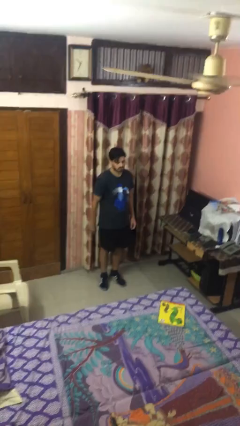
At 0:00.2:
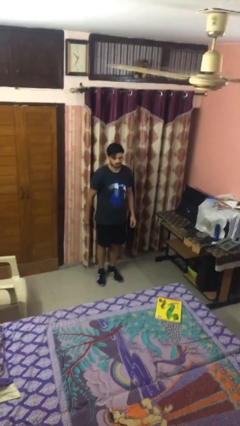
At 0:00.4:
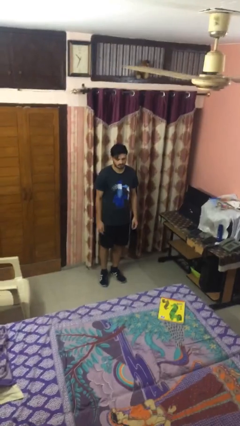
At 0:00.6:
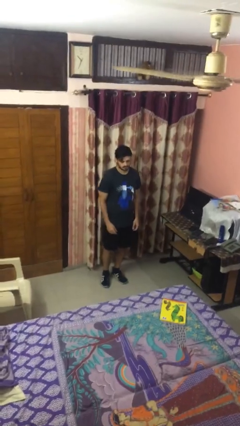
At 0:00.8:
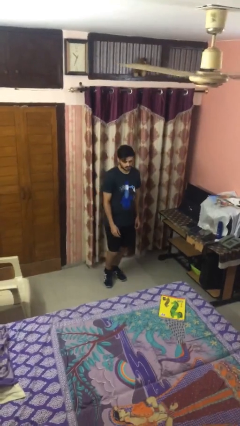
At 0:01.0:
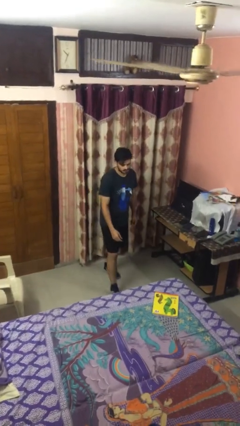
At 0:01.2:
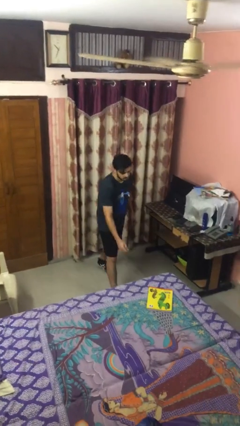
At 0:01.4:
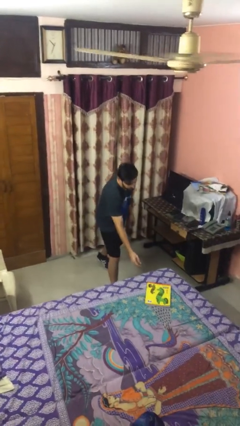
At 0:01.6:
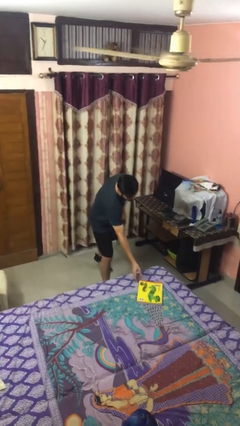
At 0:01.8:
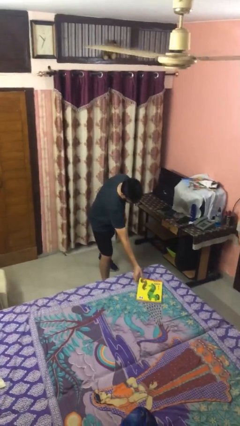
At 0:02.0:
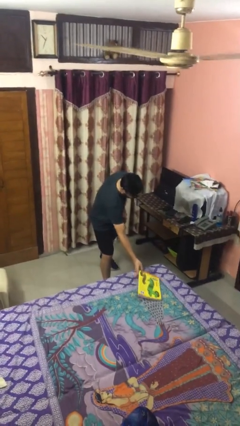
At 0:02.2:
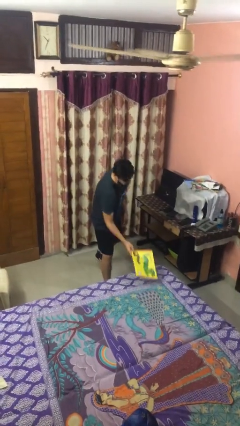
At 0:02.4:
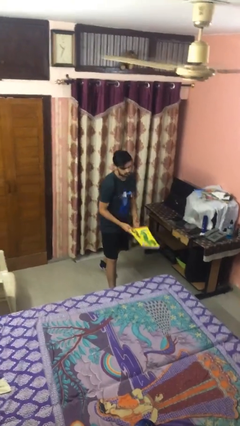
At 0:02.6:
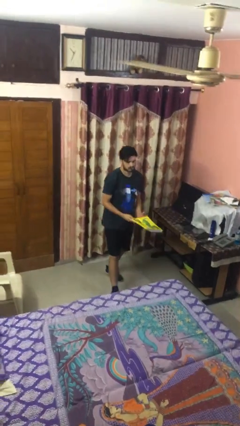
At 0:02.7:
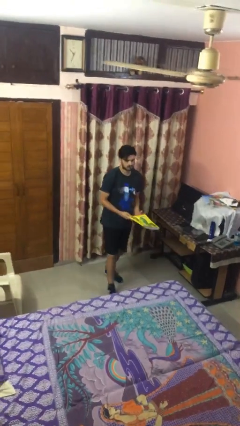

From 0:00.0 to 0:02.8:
person picks up object from bed

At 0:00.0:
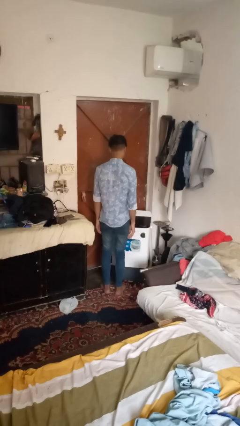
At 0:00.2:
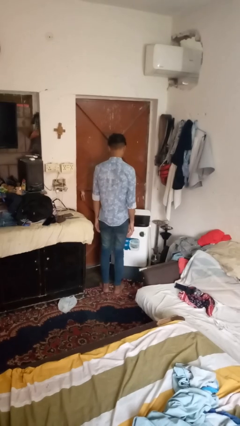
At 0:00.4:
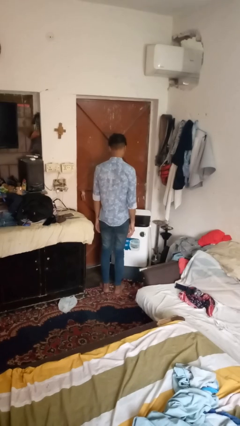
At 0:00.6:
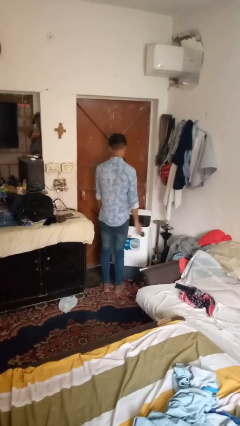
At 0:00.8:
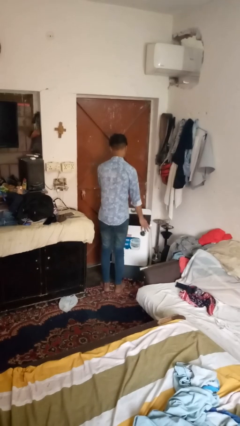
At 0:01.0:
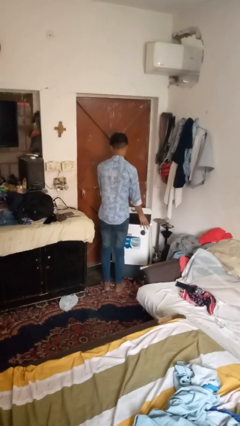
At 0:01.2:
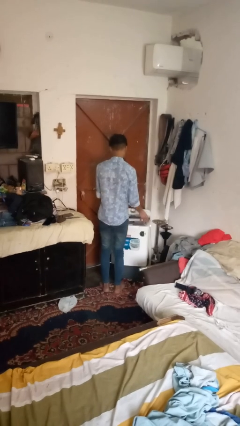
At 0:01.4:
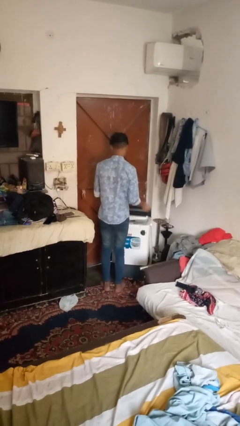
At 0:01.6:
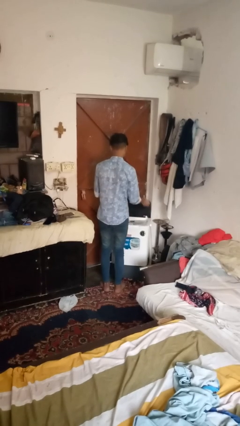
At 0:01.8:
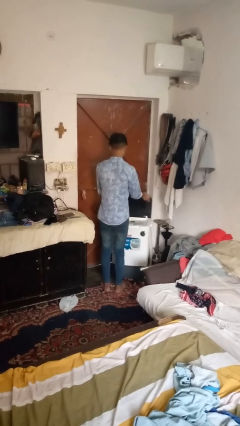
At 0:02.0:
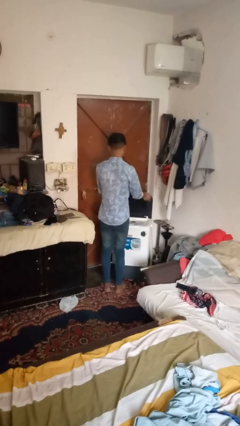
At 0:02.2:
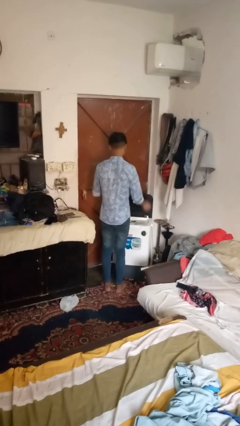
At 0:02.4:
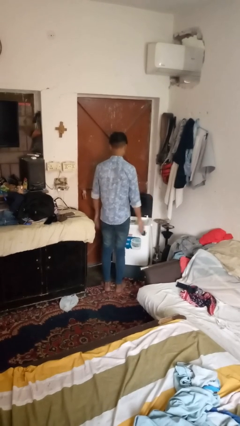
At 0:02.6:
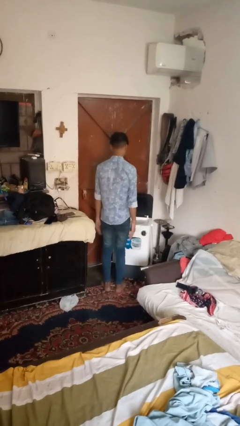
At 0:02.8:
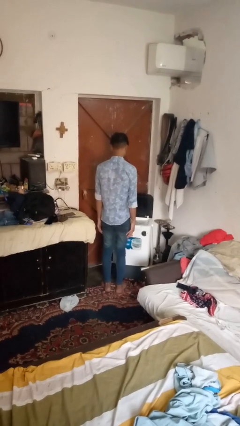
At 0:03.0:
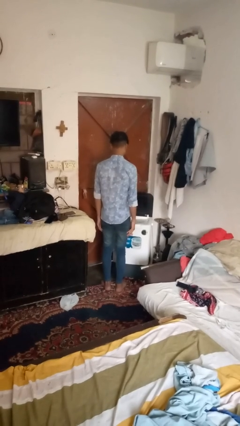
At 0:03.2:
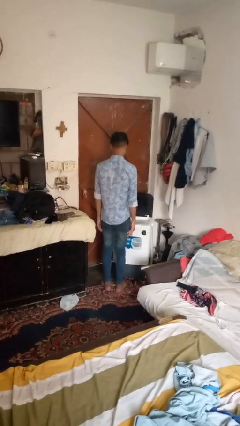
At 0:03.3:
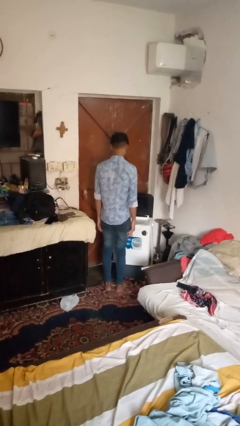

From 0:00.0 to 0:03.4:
person opens clothes washer

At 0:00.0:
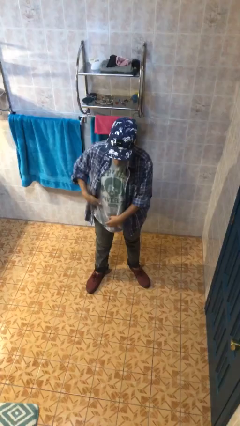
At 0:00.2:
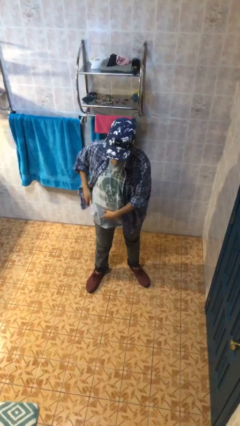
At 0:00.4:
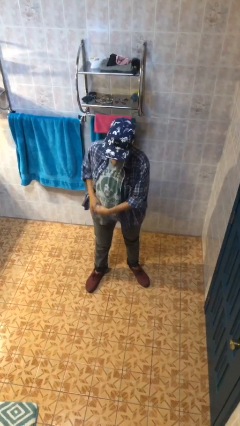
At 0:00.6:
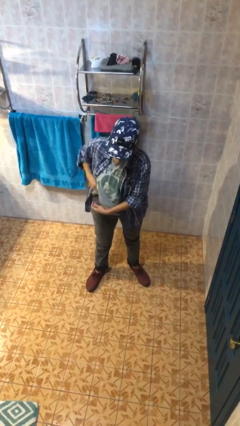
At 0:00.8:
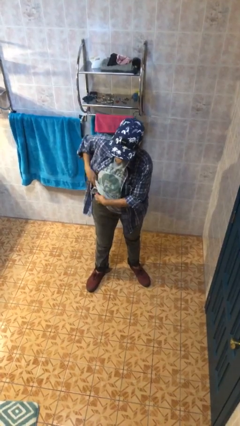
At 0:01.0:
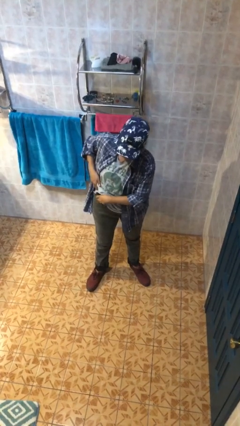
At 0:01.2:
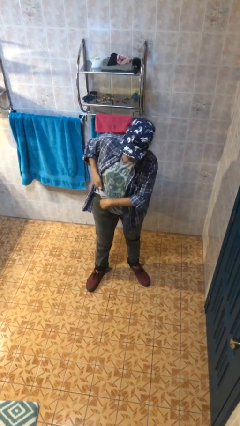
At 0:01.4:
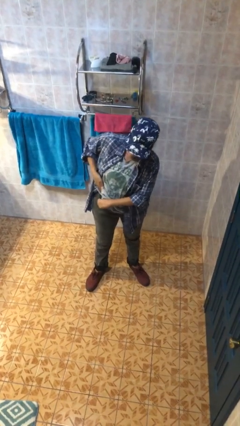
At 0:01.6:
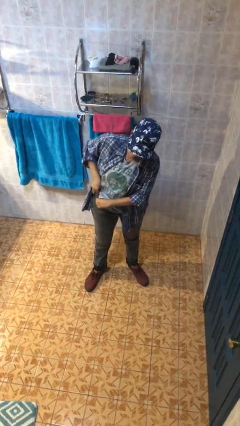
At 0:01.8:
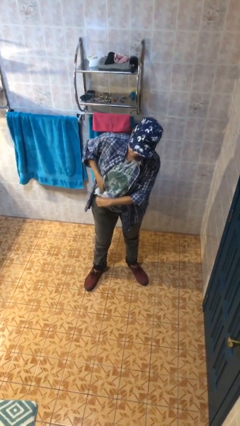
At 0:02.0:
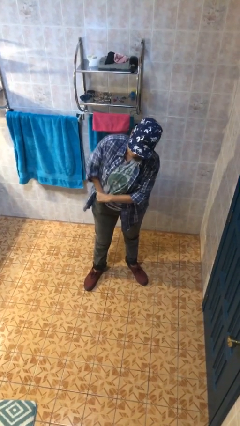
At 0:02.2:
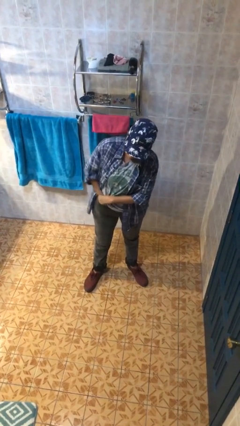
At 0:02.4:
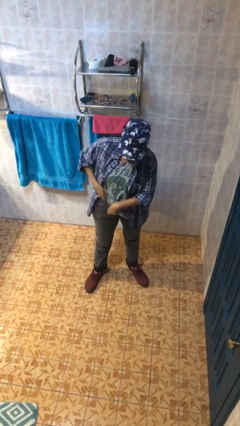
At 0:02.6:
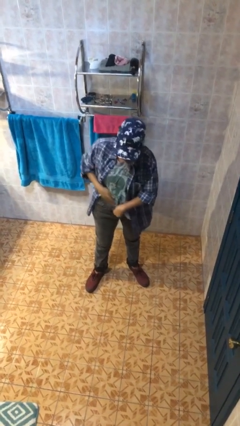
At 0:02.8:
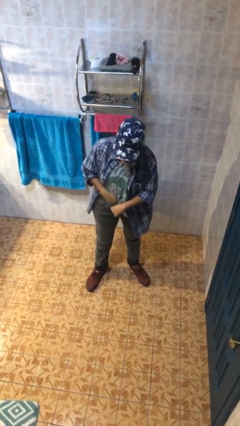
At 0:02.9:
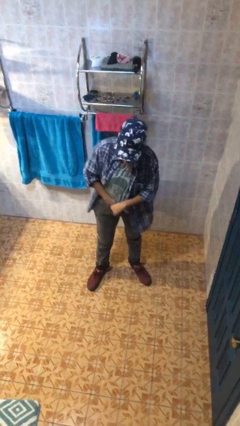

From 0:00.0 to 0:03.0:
person tucks in shirt

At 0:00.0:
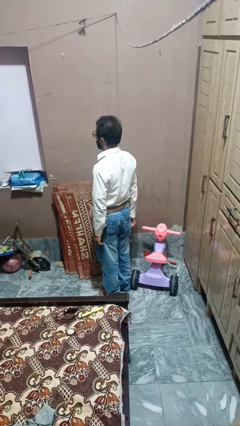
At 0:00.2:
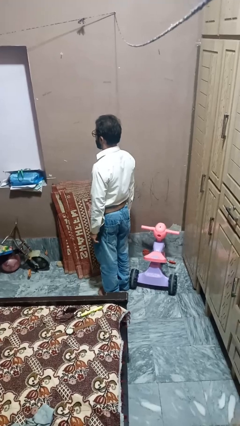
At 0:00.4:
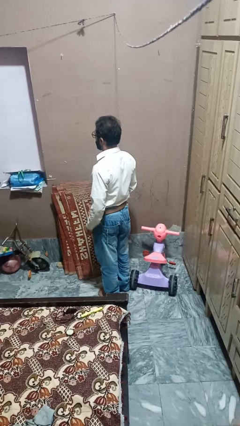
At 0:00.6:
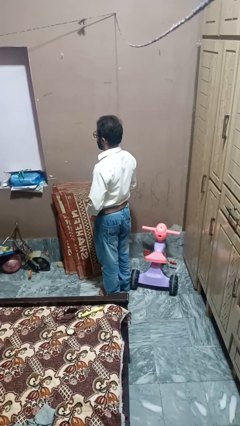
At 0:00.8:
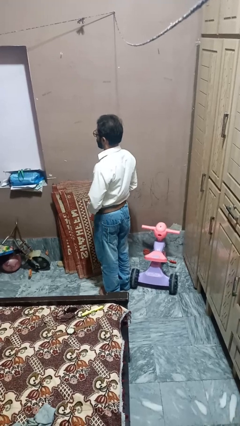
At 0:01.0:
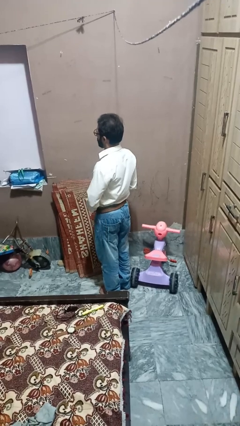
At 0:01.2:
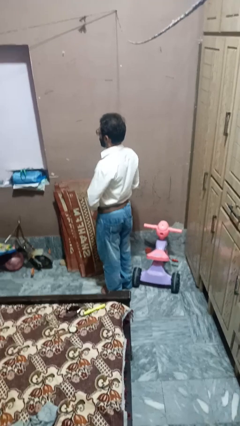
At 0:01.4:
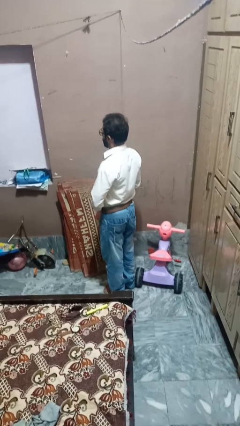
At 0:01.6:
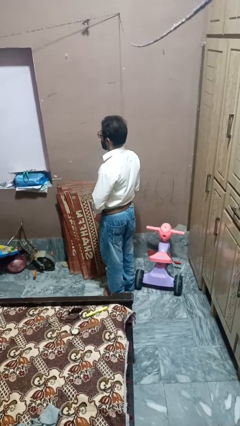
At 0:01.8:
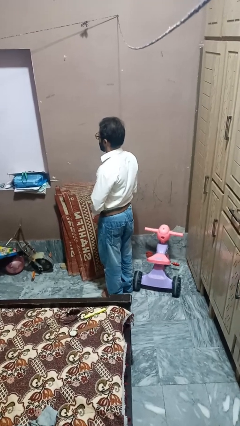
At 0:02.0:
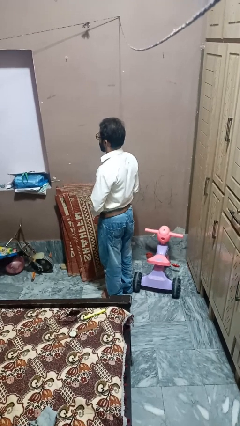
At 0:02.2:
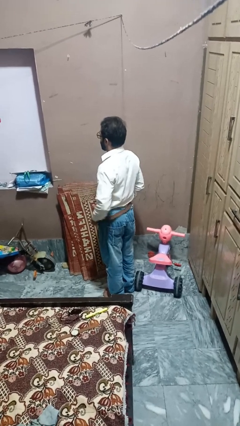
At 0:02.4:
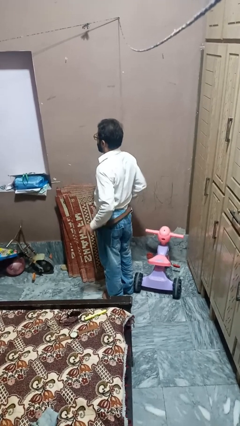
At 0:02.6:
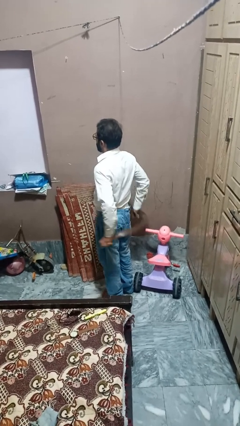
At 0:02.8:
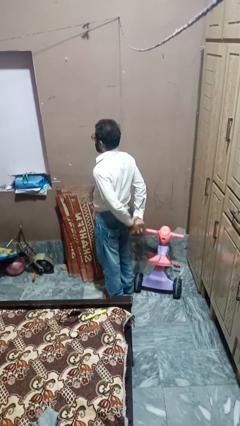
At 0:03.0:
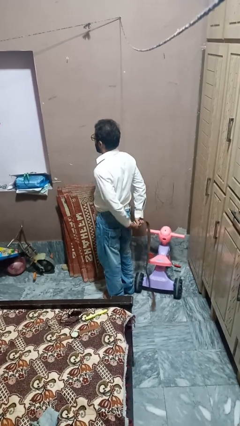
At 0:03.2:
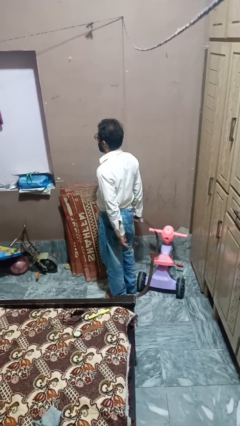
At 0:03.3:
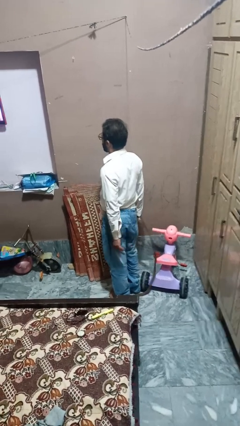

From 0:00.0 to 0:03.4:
person takes off belt

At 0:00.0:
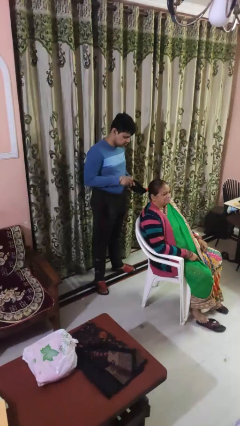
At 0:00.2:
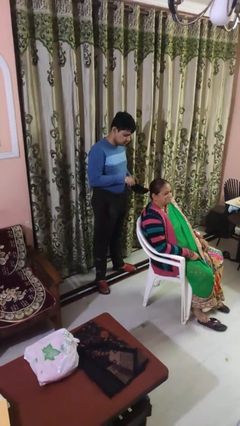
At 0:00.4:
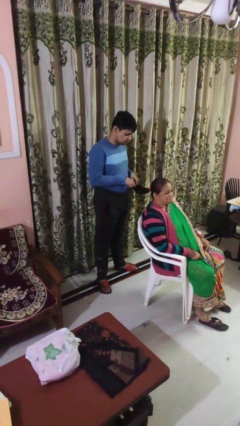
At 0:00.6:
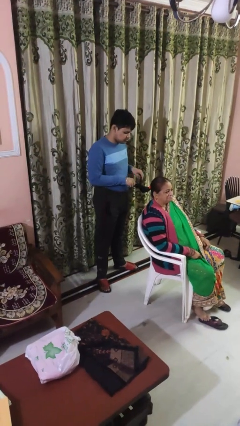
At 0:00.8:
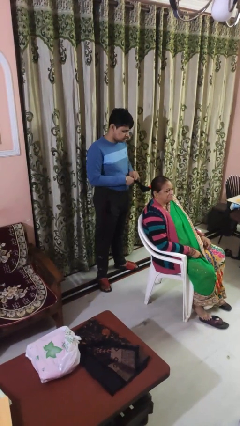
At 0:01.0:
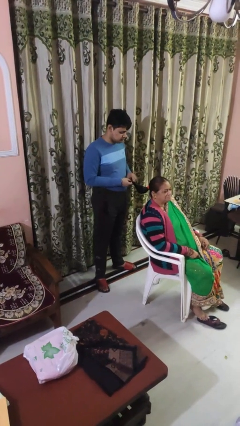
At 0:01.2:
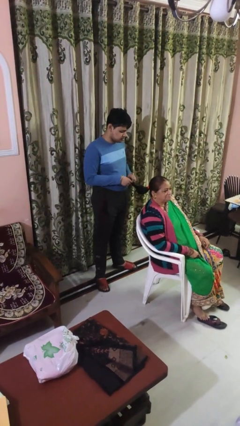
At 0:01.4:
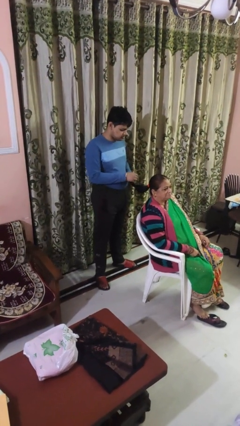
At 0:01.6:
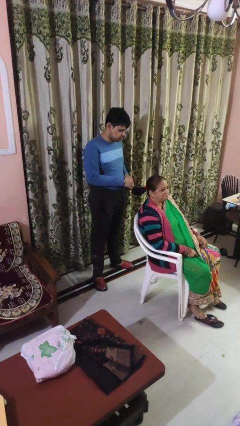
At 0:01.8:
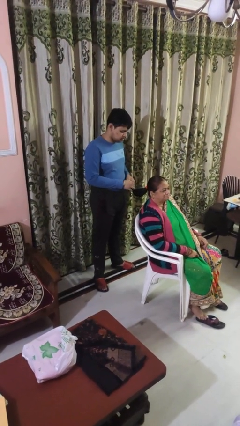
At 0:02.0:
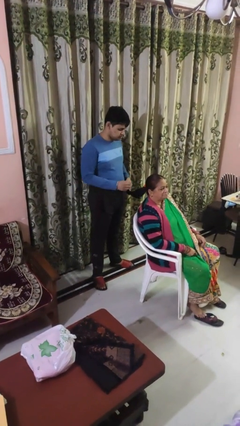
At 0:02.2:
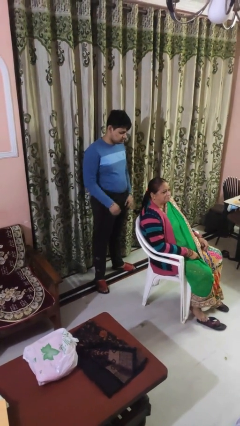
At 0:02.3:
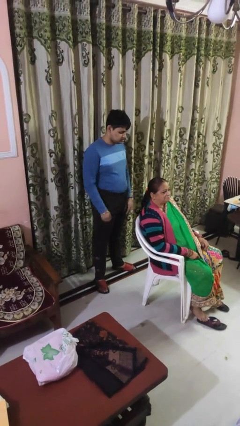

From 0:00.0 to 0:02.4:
person braids hair of person

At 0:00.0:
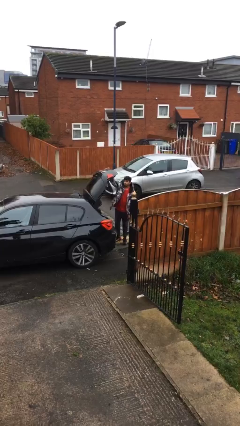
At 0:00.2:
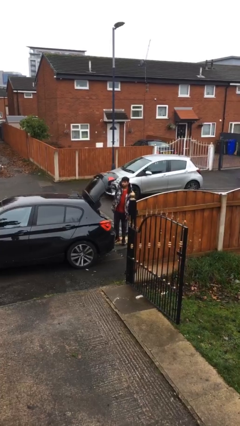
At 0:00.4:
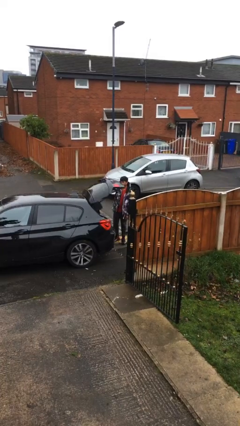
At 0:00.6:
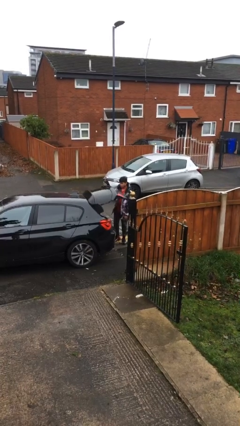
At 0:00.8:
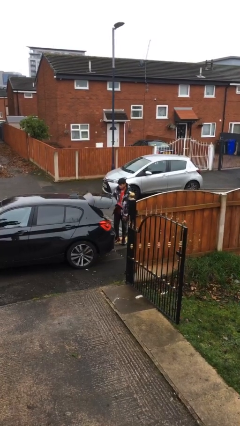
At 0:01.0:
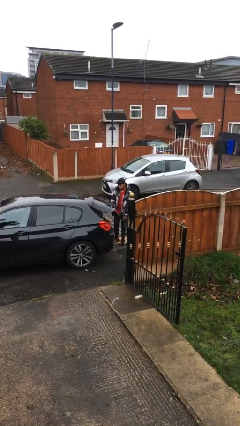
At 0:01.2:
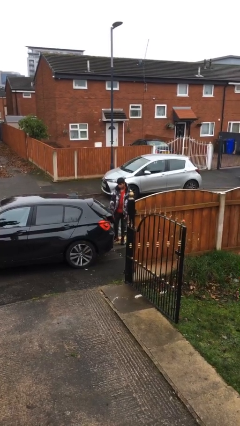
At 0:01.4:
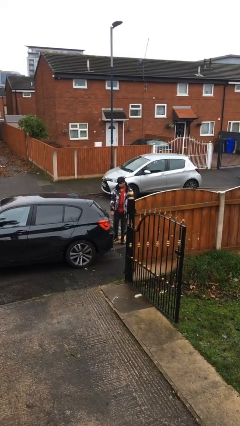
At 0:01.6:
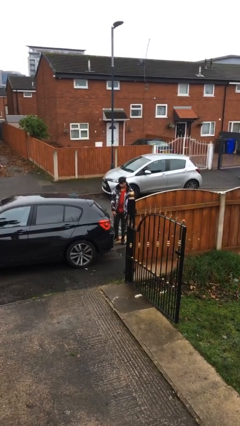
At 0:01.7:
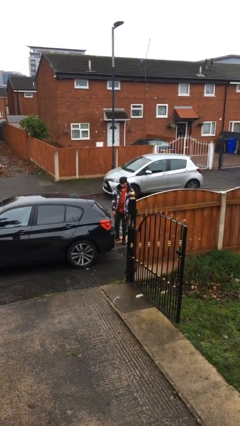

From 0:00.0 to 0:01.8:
person closes car trunk

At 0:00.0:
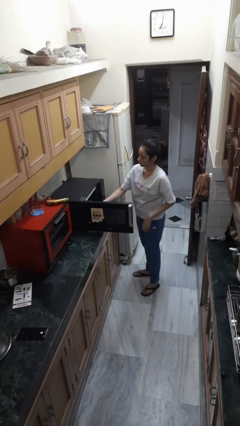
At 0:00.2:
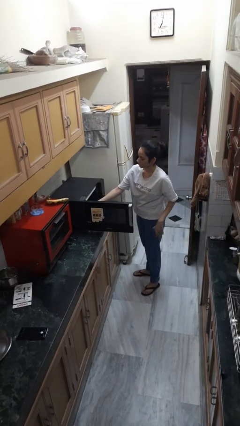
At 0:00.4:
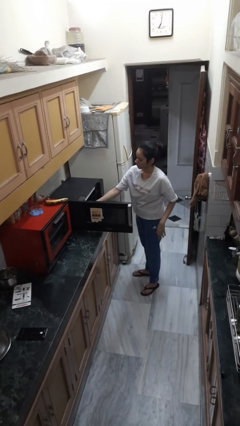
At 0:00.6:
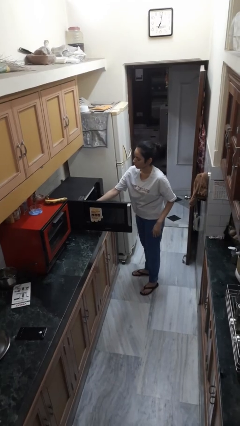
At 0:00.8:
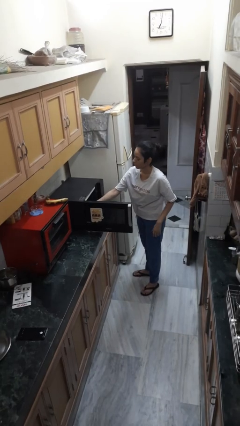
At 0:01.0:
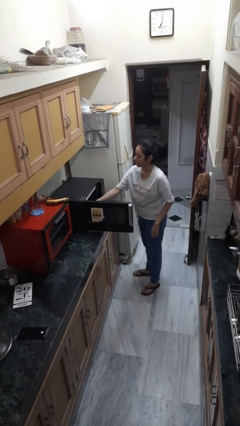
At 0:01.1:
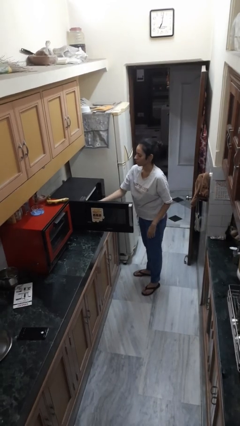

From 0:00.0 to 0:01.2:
person puts object into microwave
